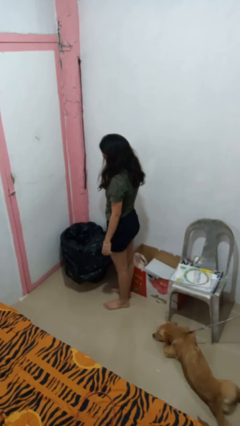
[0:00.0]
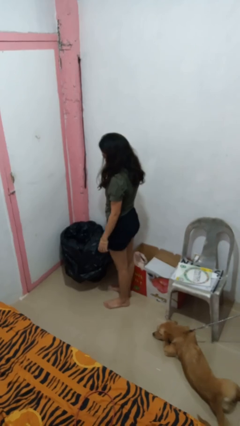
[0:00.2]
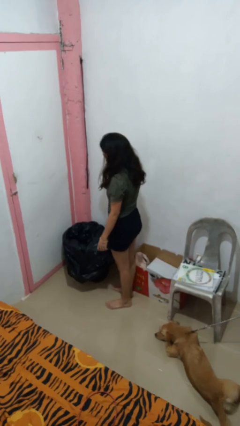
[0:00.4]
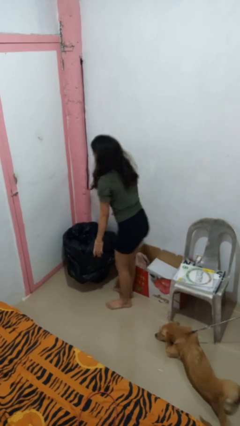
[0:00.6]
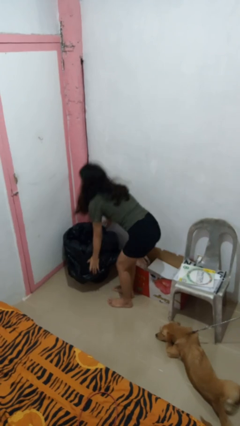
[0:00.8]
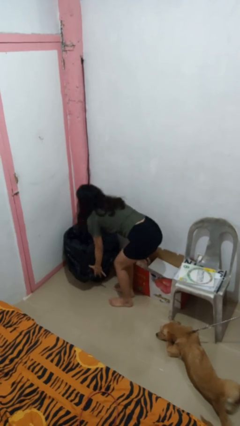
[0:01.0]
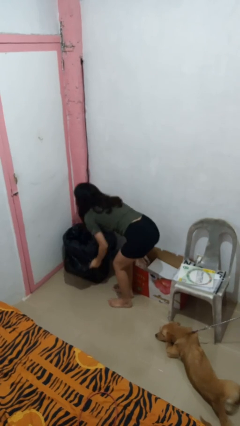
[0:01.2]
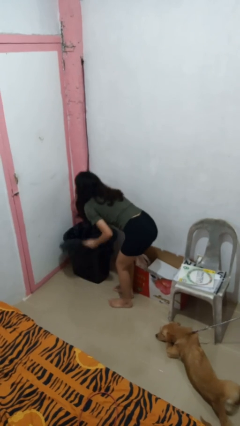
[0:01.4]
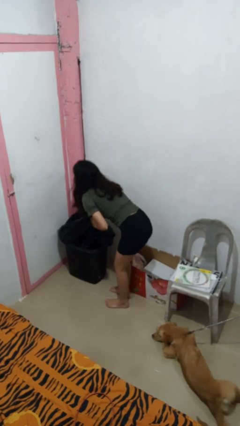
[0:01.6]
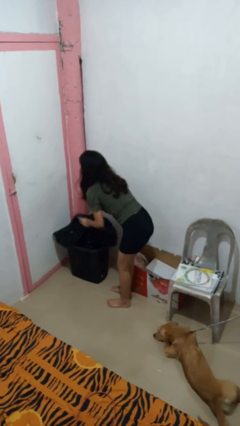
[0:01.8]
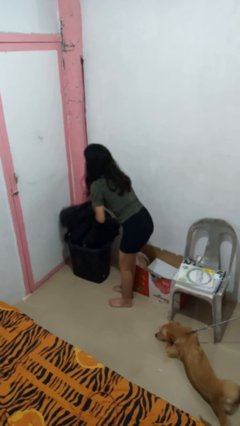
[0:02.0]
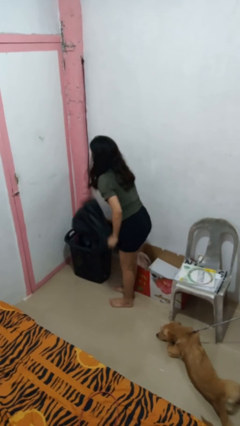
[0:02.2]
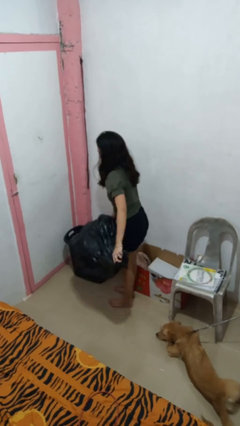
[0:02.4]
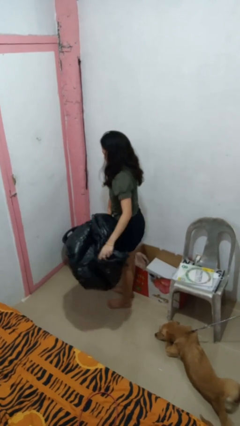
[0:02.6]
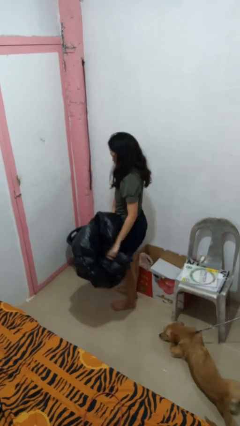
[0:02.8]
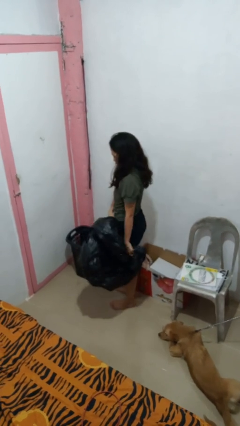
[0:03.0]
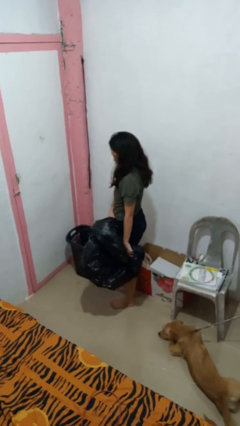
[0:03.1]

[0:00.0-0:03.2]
person removes trashbag from trashcan

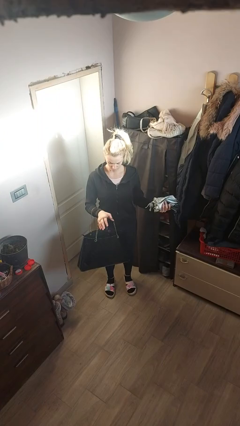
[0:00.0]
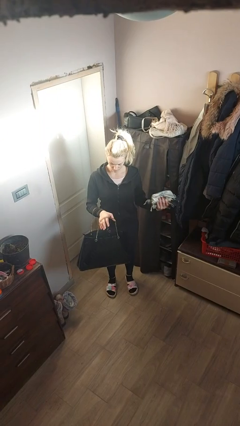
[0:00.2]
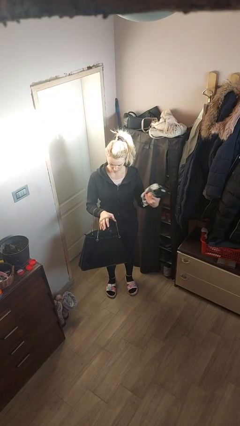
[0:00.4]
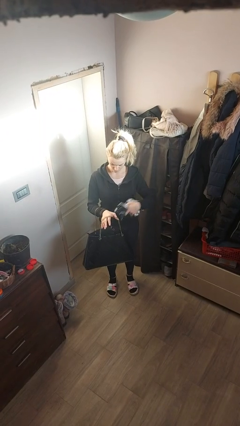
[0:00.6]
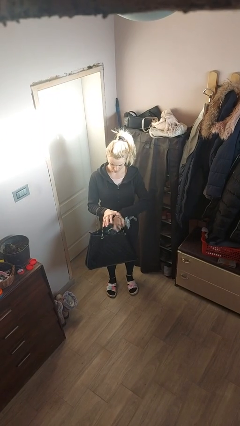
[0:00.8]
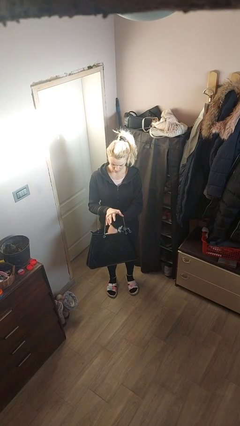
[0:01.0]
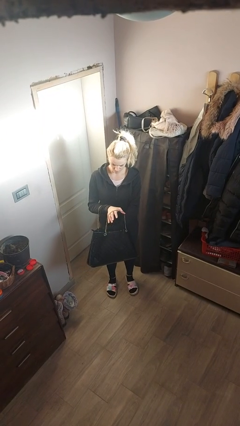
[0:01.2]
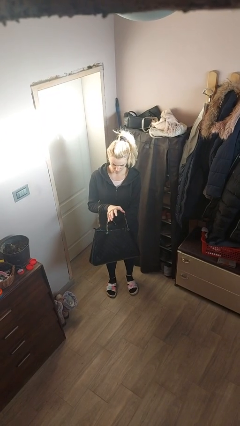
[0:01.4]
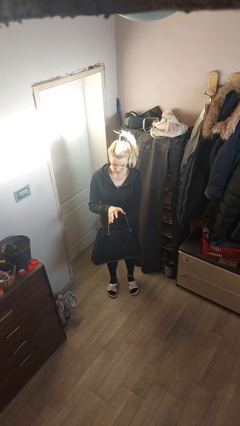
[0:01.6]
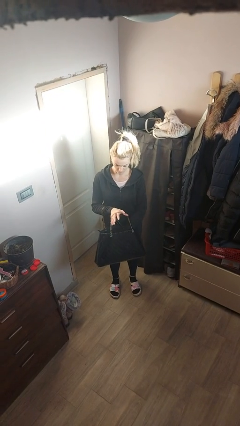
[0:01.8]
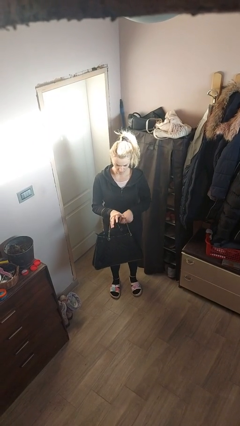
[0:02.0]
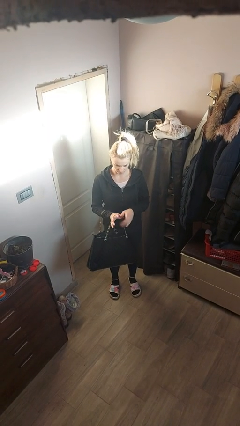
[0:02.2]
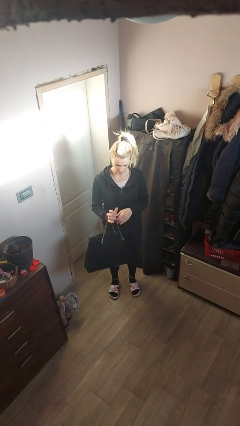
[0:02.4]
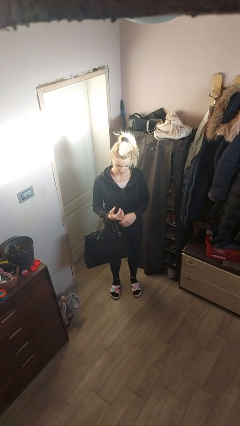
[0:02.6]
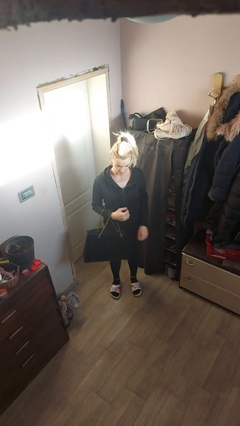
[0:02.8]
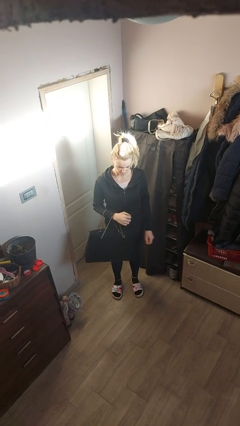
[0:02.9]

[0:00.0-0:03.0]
person puts object into purse

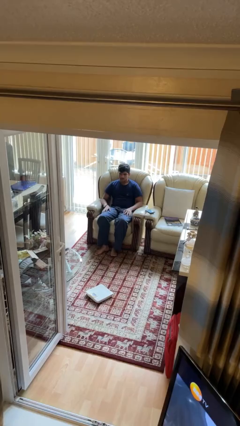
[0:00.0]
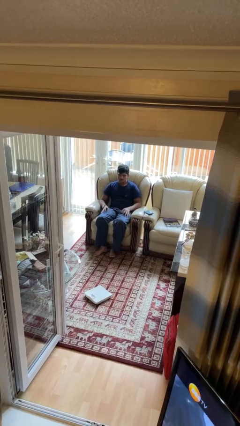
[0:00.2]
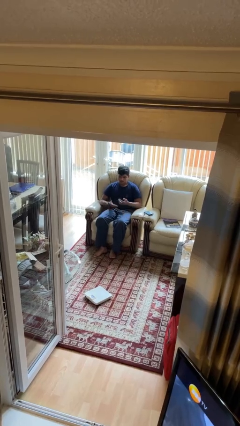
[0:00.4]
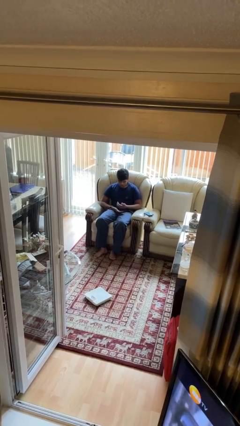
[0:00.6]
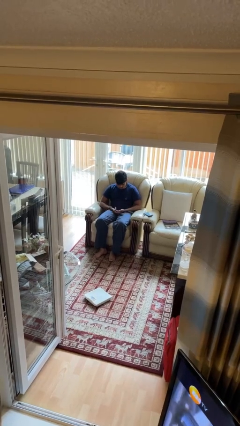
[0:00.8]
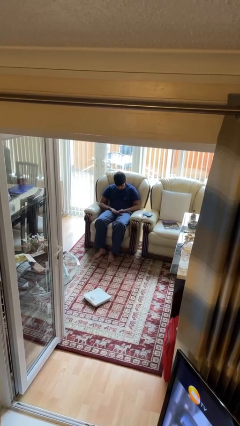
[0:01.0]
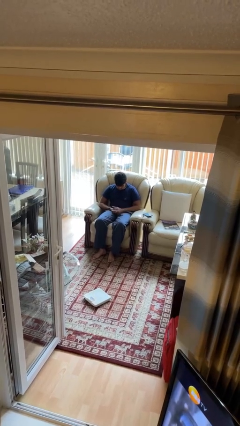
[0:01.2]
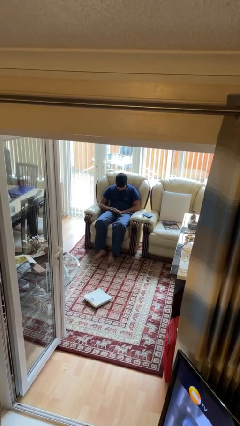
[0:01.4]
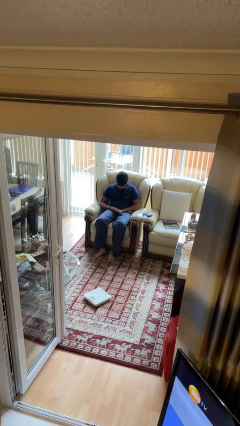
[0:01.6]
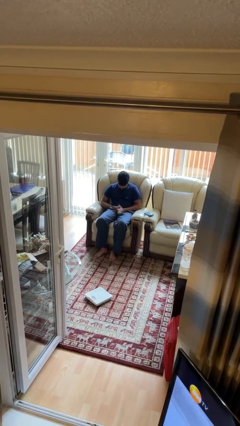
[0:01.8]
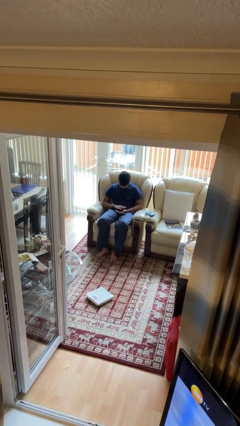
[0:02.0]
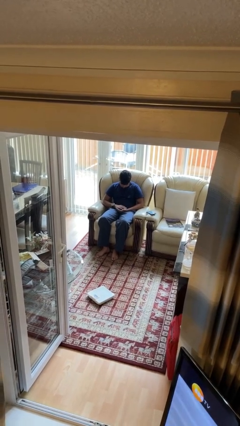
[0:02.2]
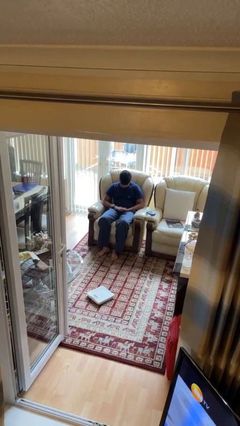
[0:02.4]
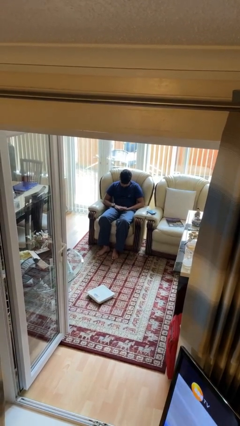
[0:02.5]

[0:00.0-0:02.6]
person looks at hands in lap

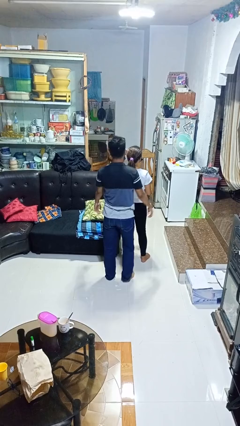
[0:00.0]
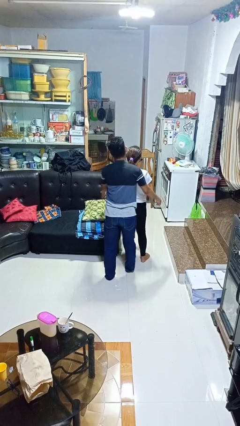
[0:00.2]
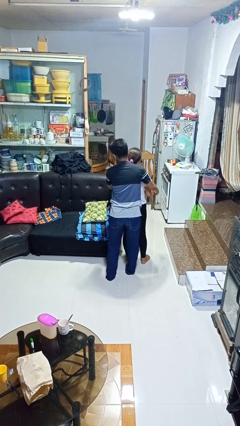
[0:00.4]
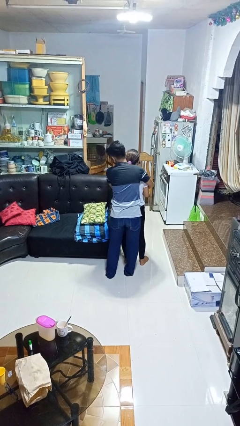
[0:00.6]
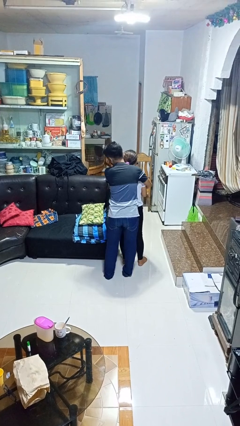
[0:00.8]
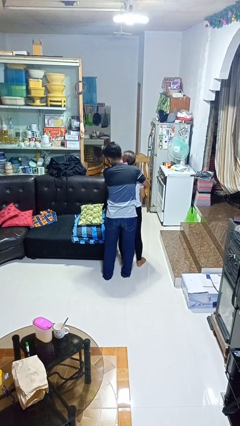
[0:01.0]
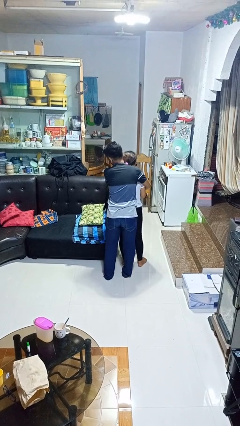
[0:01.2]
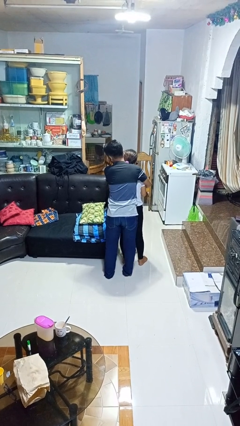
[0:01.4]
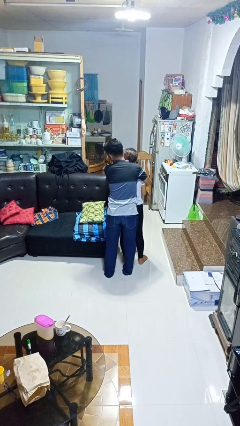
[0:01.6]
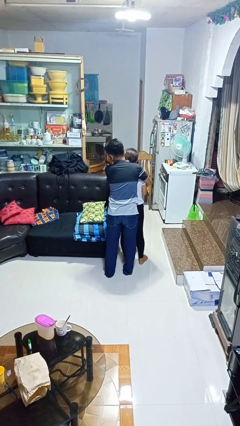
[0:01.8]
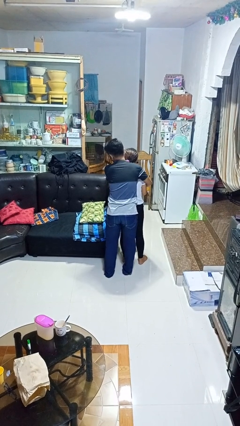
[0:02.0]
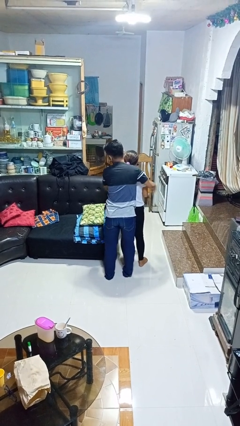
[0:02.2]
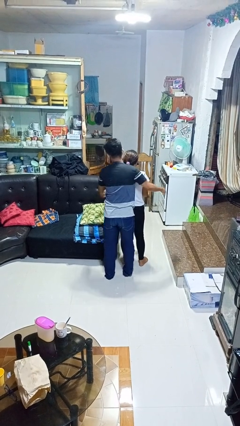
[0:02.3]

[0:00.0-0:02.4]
person hugs person from behind

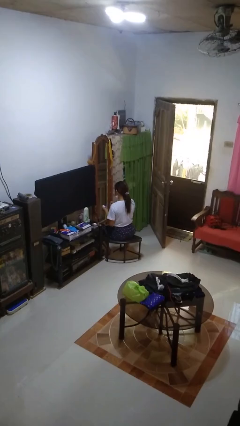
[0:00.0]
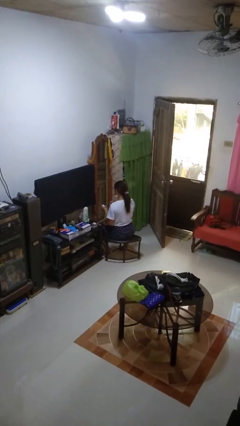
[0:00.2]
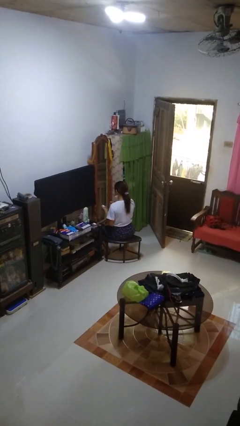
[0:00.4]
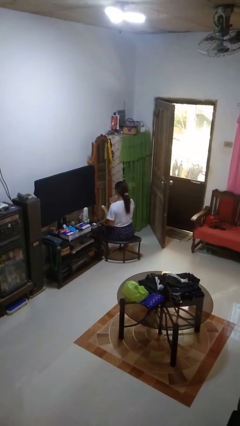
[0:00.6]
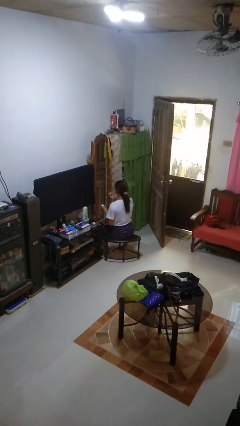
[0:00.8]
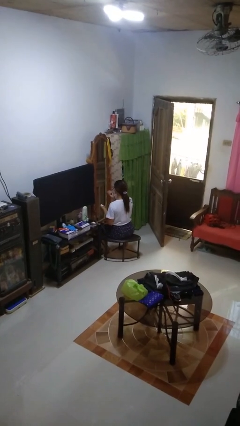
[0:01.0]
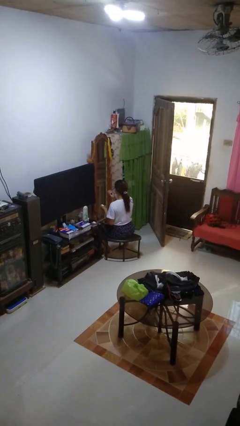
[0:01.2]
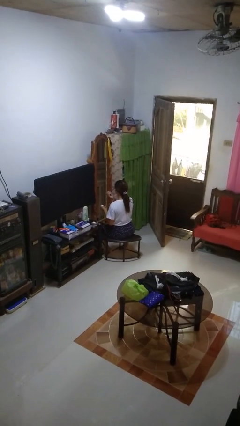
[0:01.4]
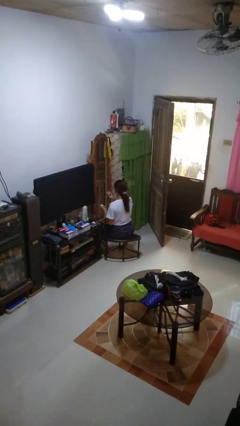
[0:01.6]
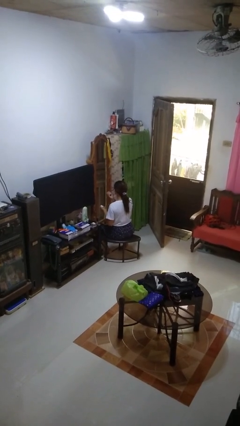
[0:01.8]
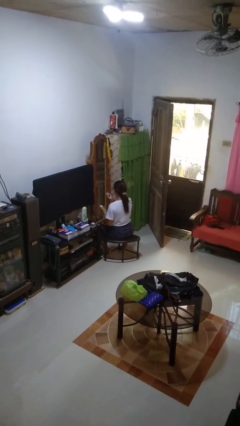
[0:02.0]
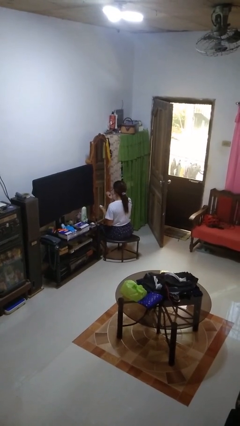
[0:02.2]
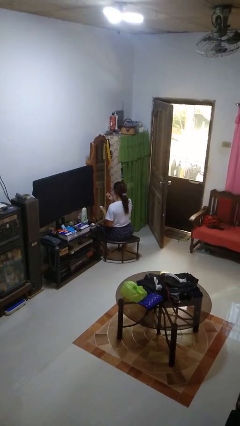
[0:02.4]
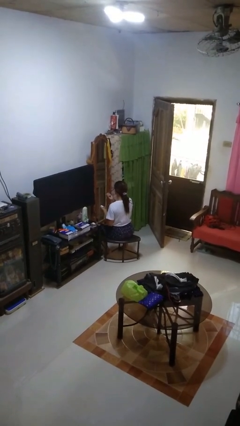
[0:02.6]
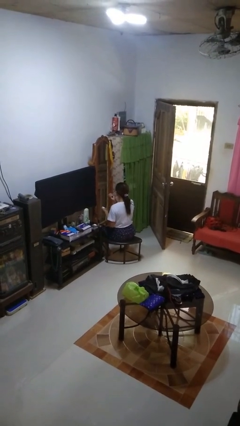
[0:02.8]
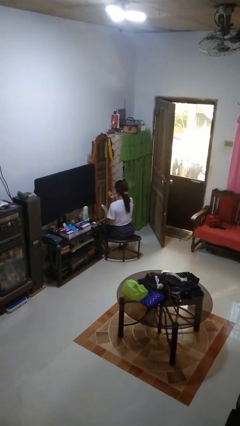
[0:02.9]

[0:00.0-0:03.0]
person applies eye makeup

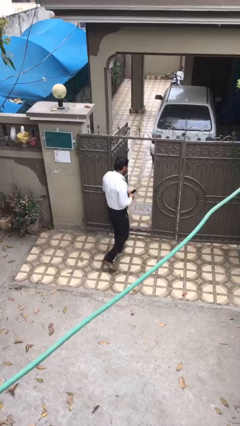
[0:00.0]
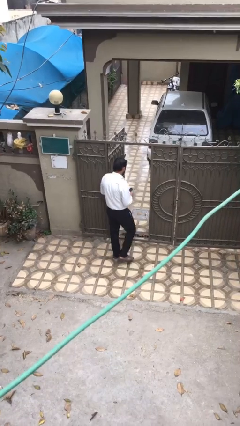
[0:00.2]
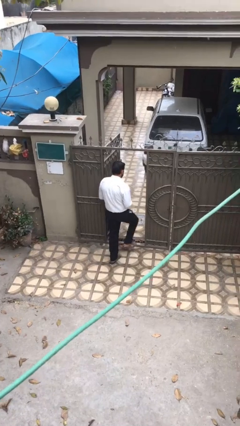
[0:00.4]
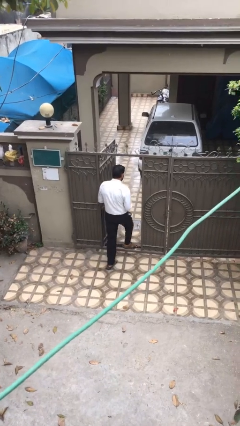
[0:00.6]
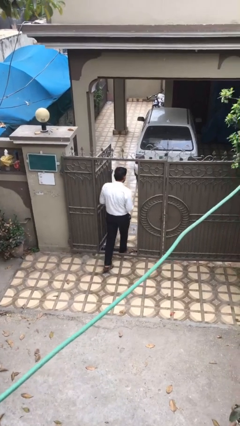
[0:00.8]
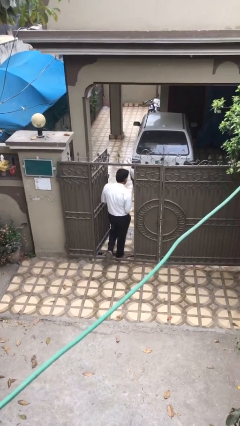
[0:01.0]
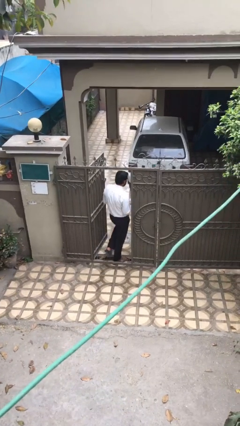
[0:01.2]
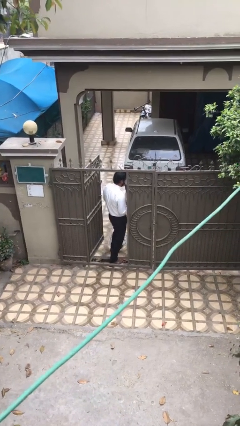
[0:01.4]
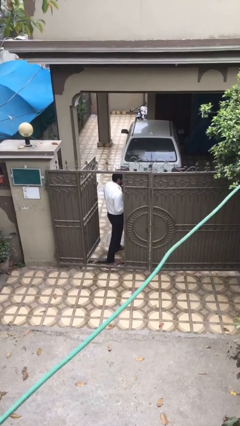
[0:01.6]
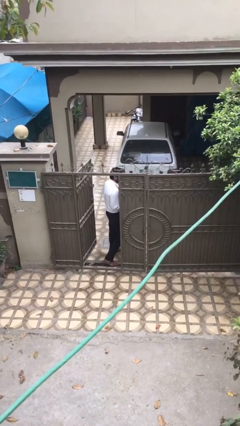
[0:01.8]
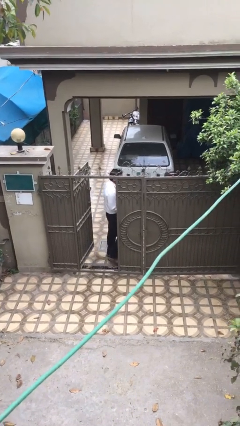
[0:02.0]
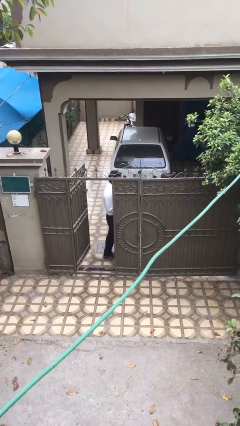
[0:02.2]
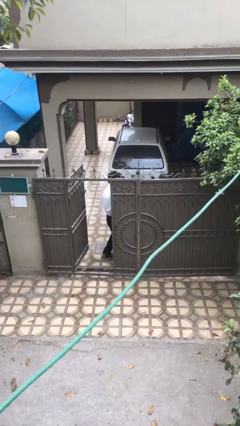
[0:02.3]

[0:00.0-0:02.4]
person exits scene through structure

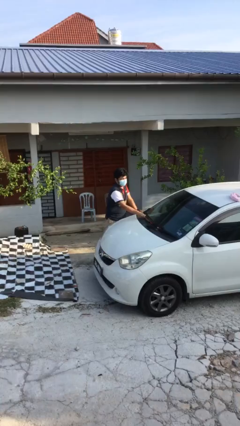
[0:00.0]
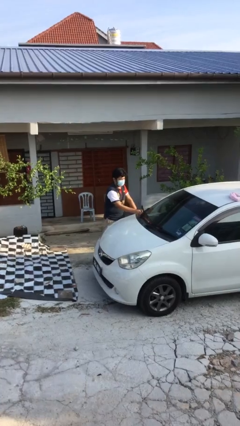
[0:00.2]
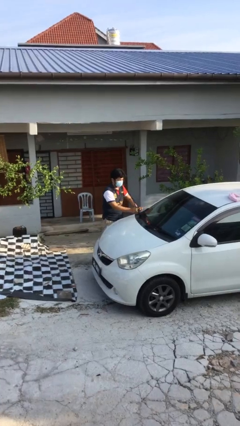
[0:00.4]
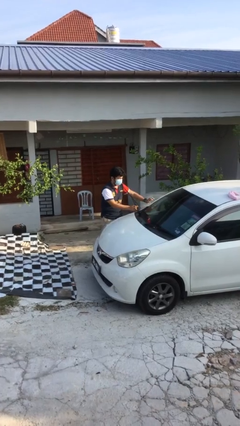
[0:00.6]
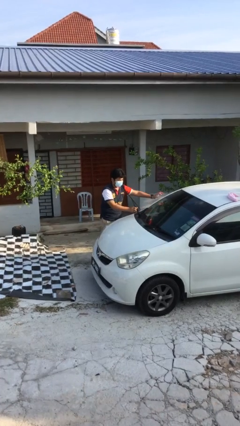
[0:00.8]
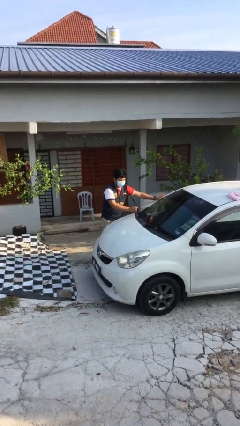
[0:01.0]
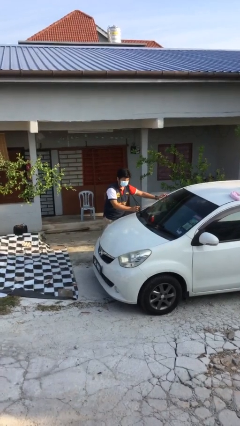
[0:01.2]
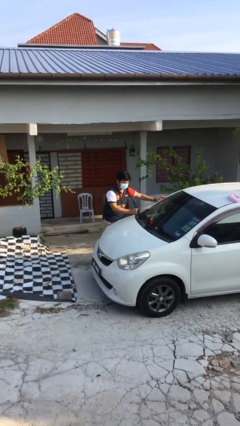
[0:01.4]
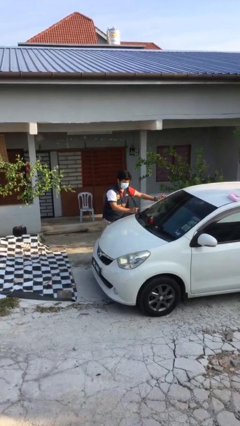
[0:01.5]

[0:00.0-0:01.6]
person flips up car wipers
